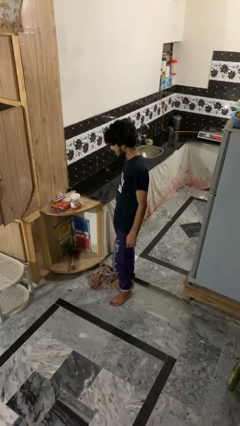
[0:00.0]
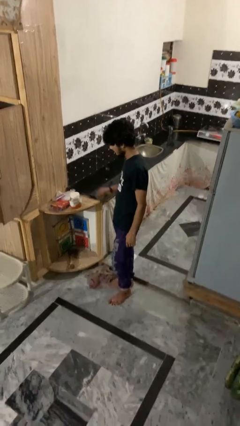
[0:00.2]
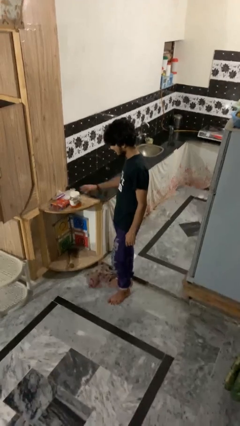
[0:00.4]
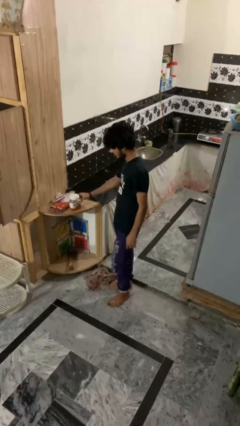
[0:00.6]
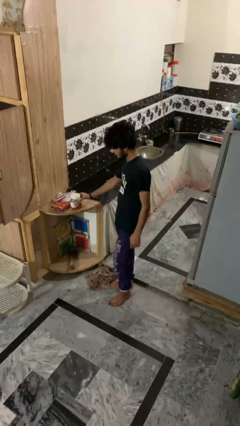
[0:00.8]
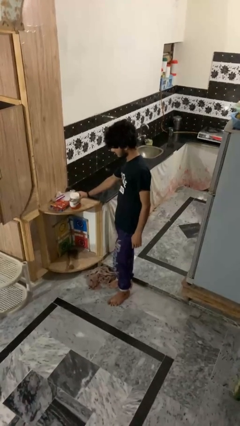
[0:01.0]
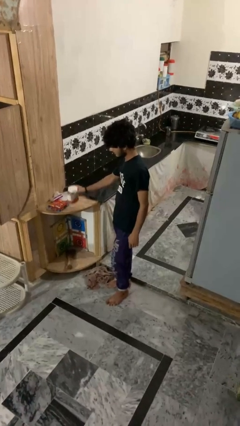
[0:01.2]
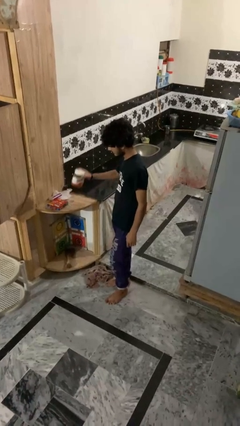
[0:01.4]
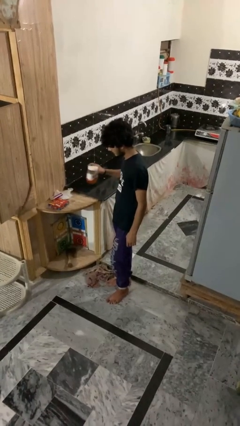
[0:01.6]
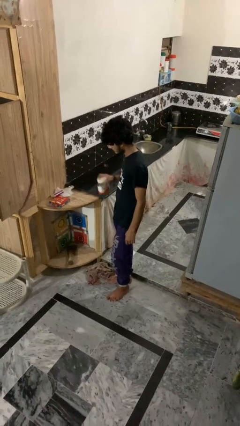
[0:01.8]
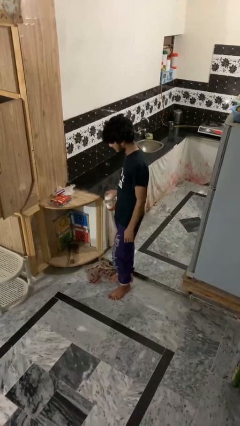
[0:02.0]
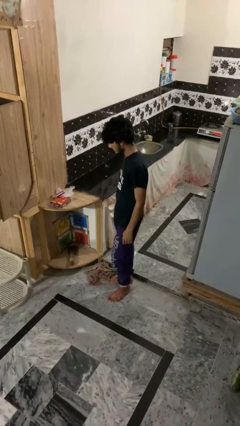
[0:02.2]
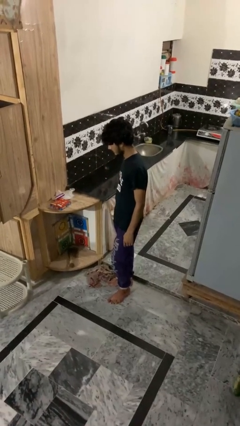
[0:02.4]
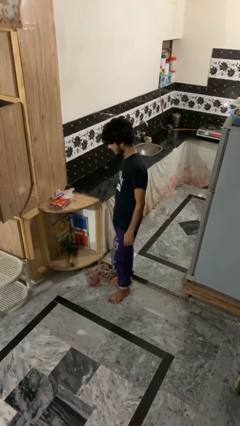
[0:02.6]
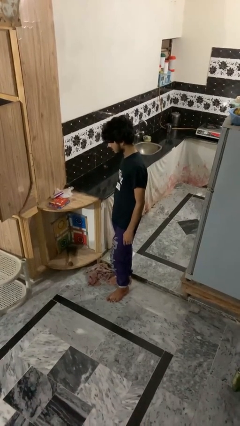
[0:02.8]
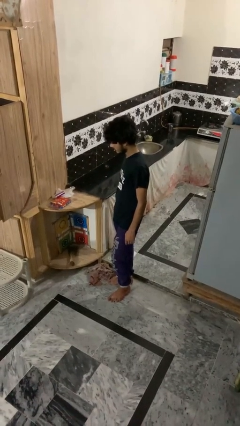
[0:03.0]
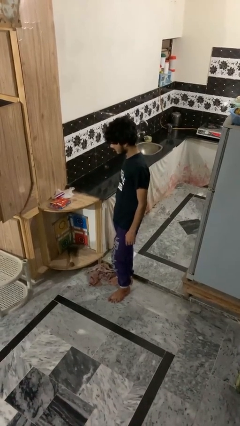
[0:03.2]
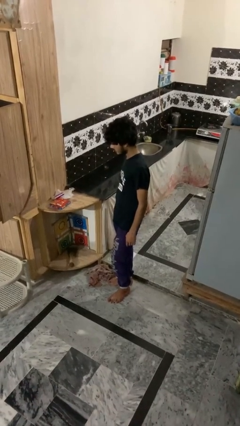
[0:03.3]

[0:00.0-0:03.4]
person picks up object from countertop

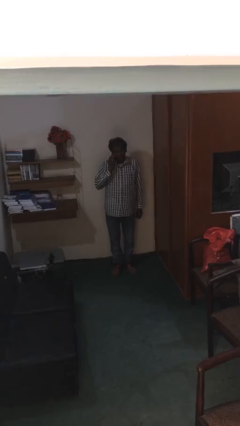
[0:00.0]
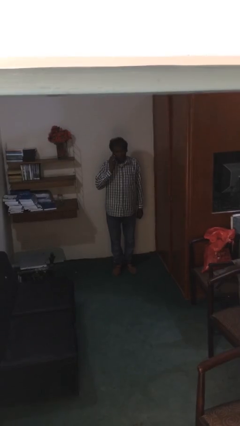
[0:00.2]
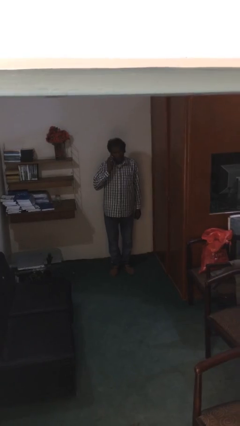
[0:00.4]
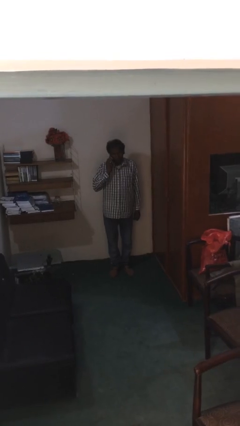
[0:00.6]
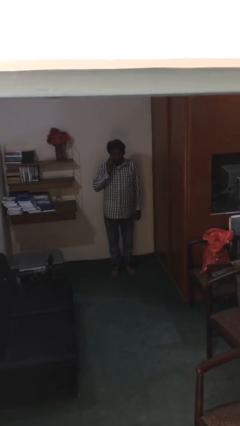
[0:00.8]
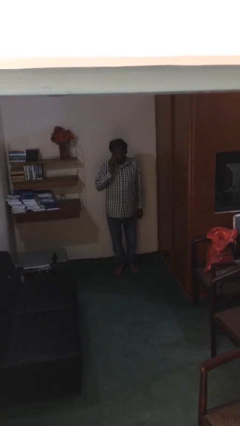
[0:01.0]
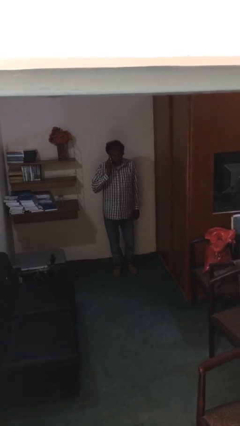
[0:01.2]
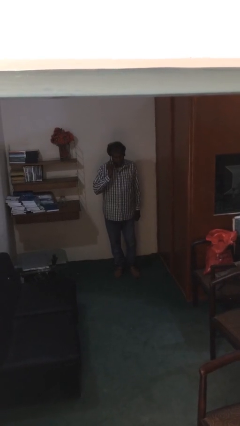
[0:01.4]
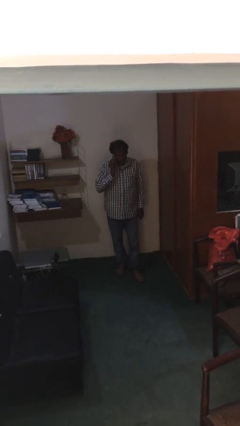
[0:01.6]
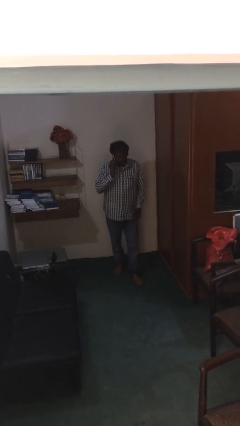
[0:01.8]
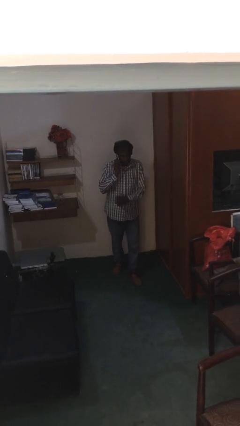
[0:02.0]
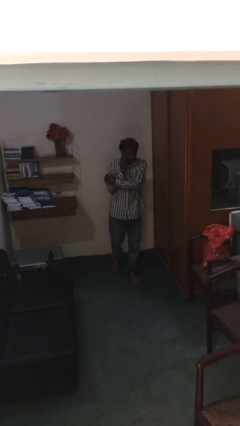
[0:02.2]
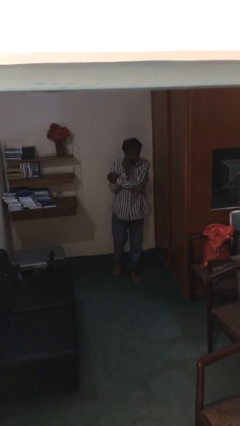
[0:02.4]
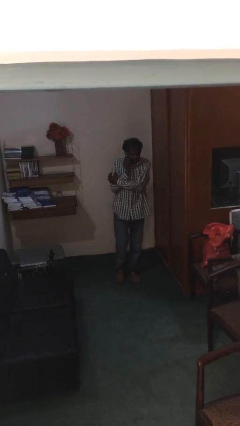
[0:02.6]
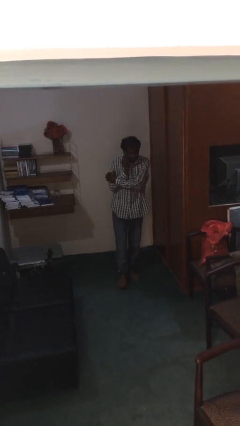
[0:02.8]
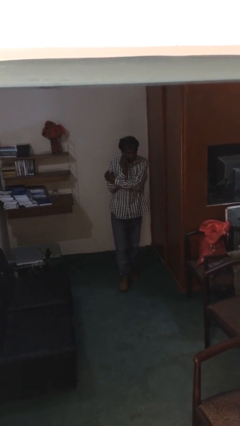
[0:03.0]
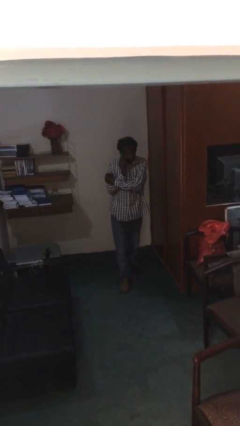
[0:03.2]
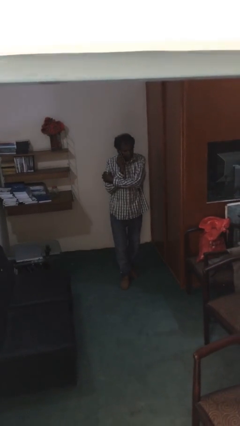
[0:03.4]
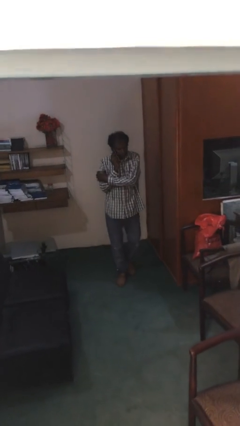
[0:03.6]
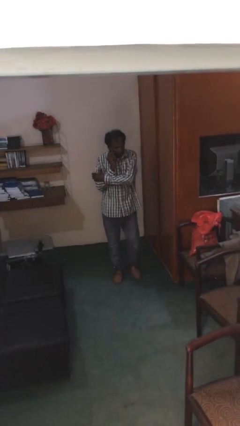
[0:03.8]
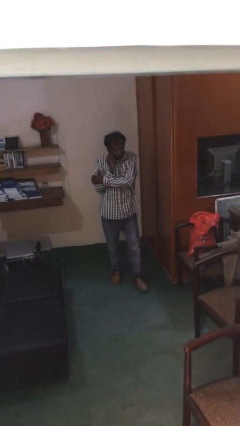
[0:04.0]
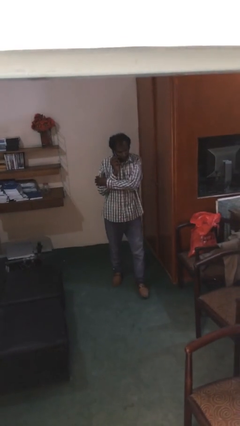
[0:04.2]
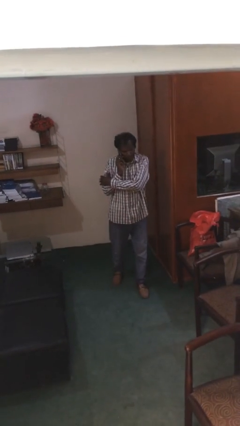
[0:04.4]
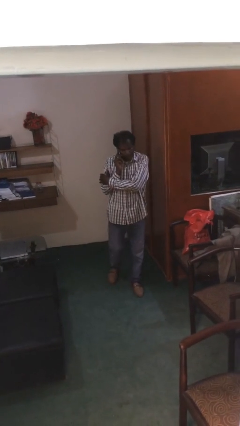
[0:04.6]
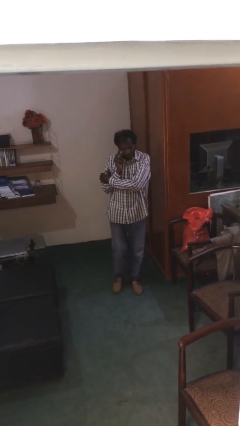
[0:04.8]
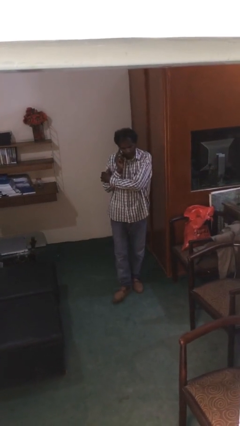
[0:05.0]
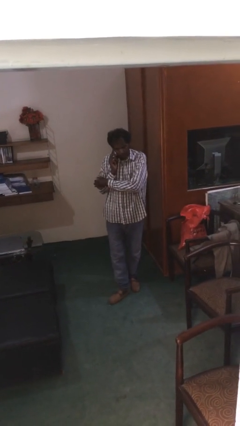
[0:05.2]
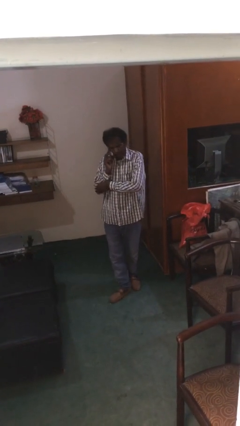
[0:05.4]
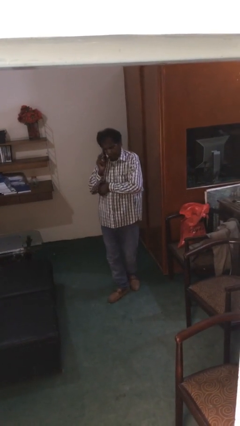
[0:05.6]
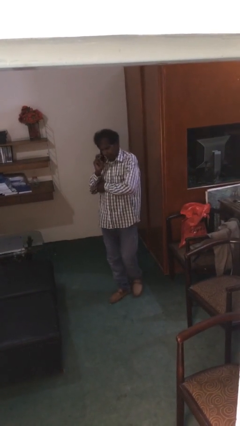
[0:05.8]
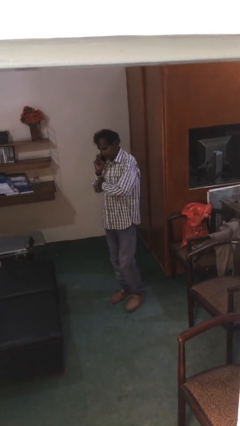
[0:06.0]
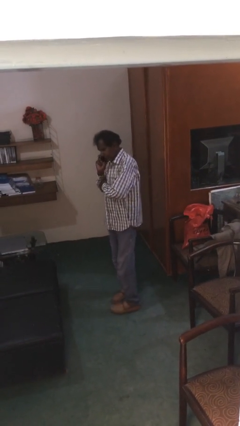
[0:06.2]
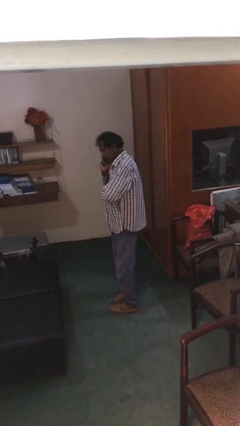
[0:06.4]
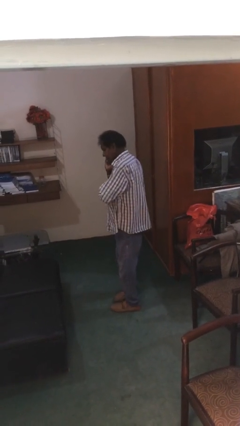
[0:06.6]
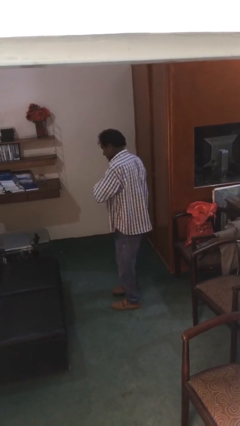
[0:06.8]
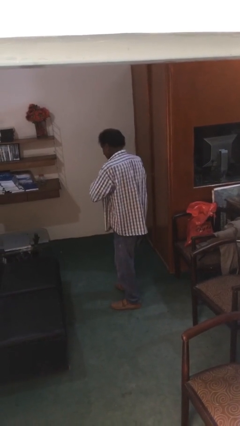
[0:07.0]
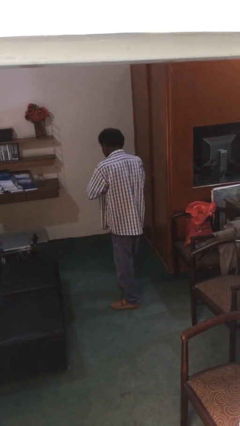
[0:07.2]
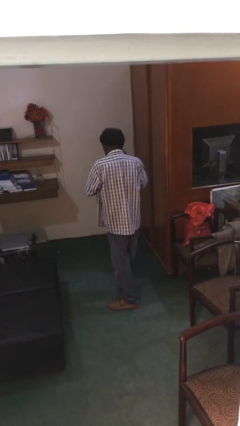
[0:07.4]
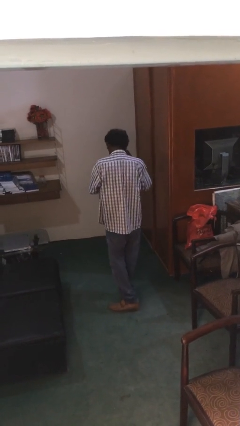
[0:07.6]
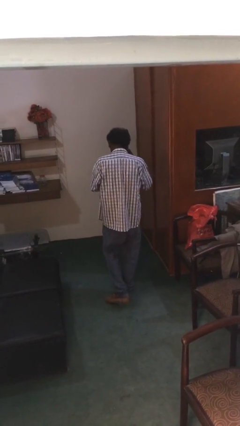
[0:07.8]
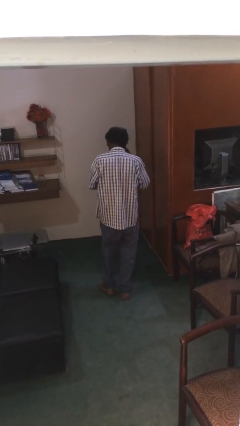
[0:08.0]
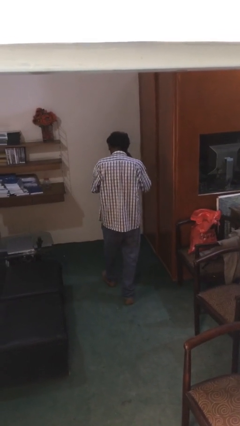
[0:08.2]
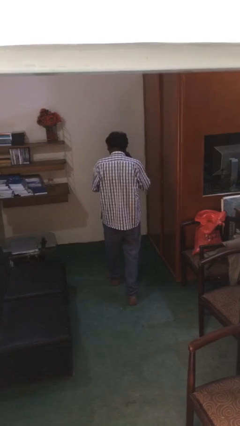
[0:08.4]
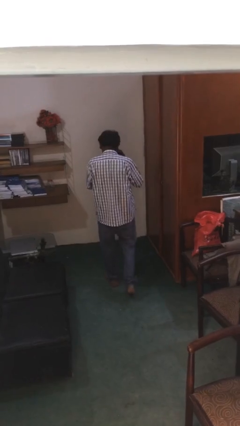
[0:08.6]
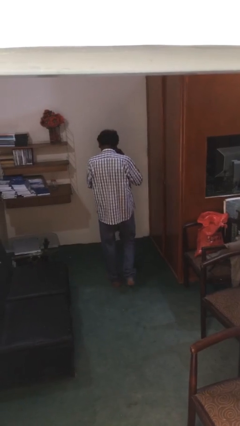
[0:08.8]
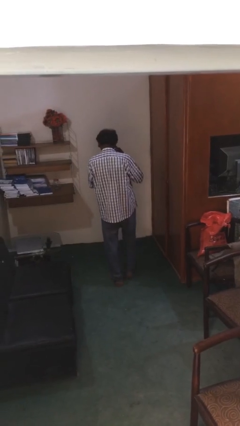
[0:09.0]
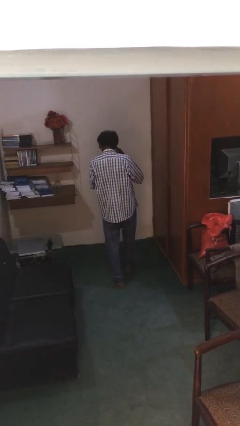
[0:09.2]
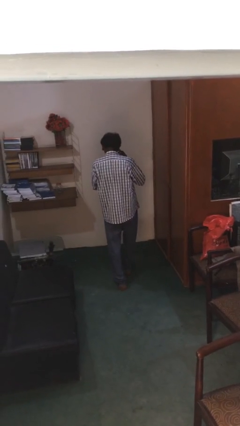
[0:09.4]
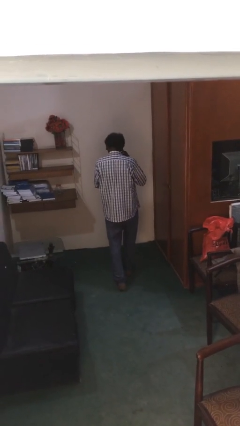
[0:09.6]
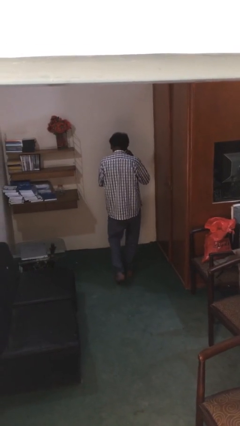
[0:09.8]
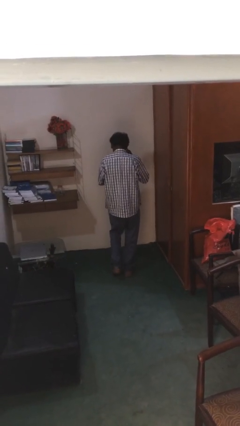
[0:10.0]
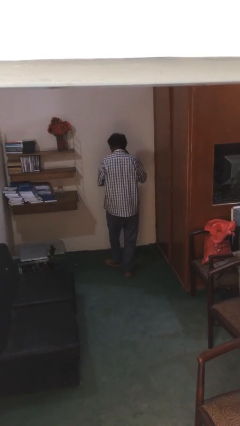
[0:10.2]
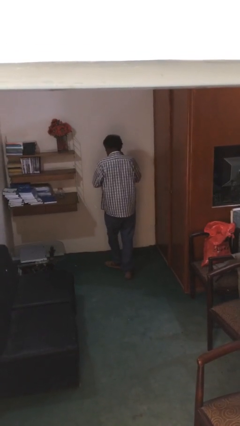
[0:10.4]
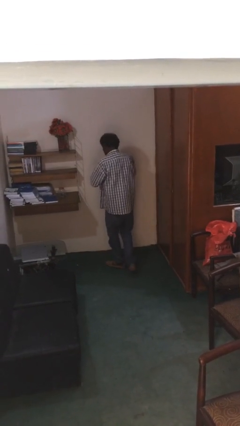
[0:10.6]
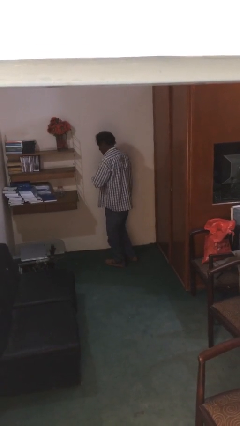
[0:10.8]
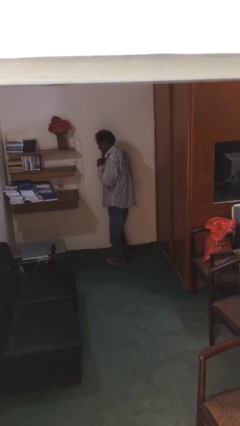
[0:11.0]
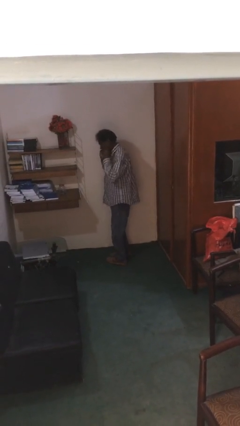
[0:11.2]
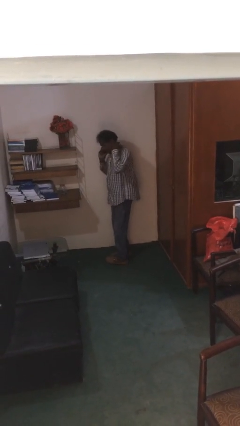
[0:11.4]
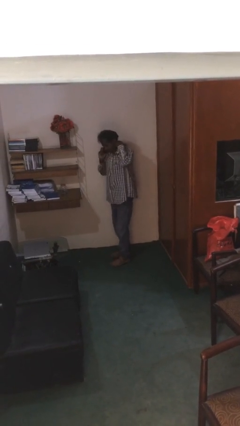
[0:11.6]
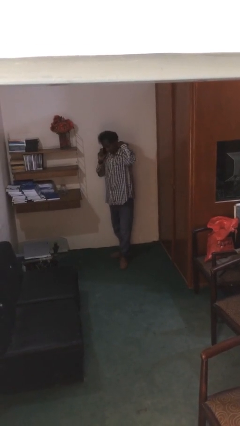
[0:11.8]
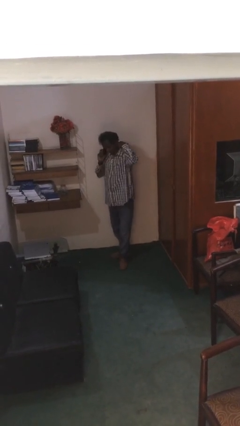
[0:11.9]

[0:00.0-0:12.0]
person talks on phone

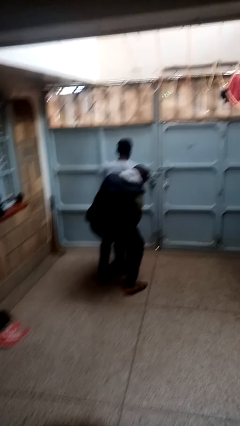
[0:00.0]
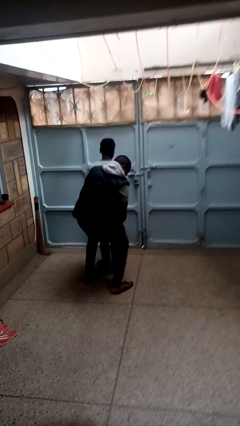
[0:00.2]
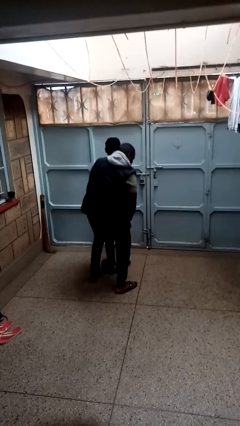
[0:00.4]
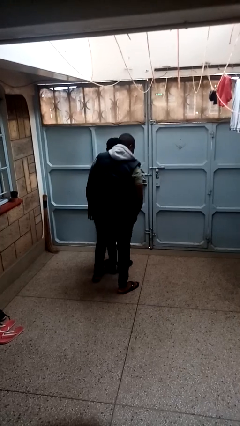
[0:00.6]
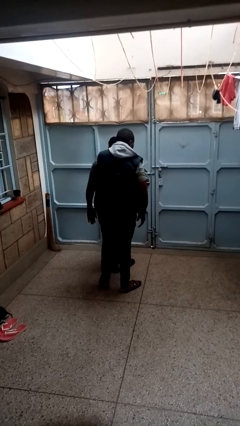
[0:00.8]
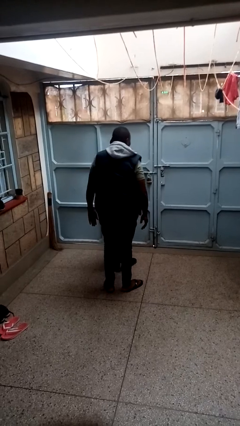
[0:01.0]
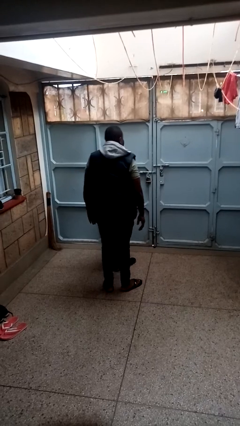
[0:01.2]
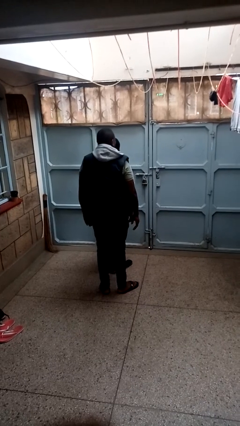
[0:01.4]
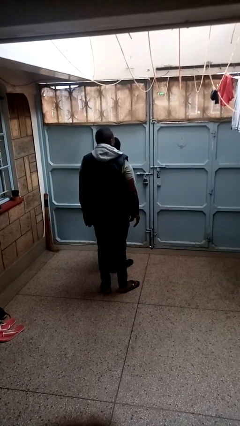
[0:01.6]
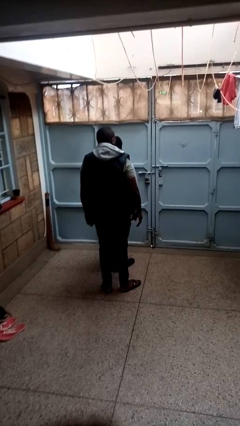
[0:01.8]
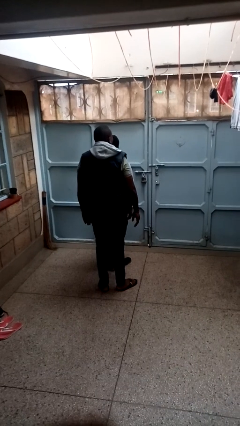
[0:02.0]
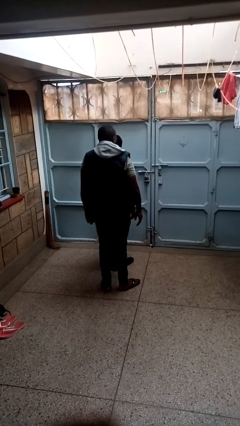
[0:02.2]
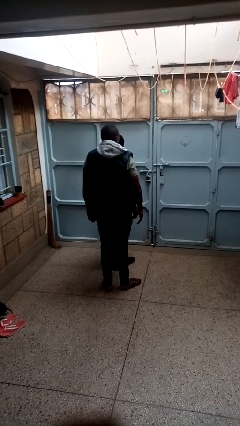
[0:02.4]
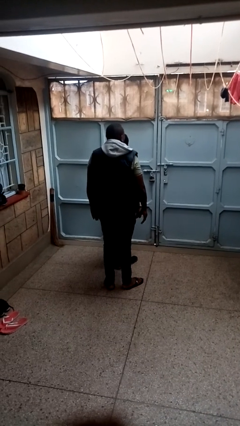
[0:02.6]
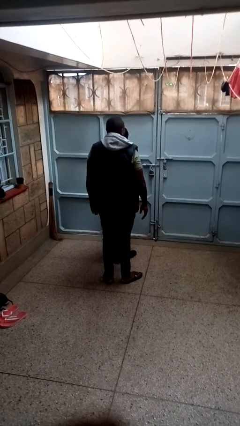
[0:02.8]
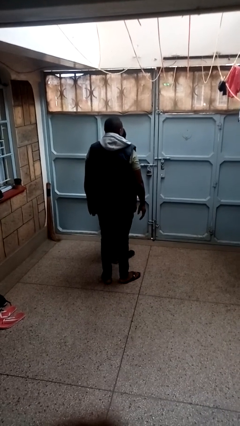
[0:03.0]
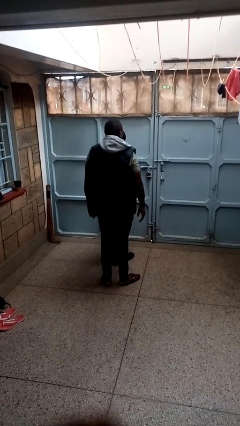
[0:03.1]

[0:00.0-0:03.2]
person puts down person
